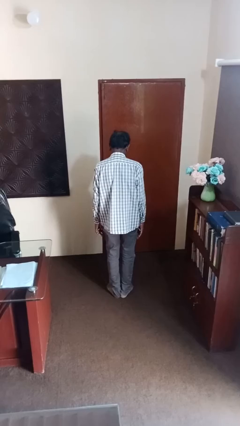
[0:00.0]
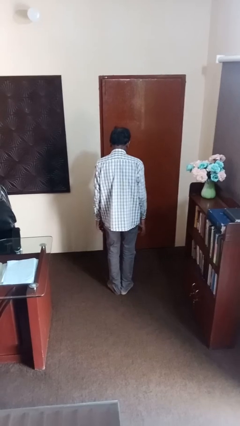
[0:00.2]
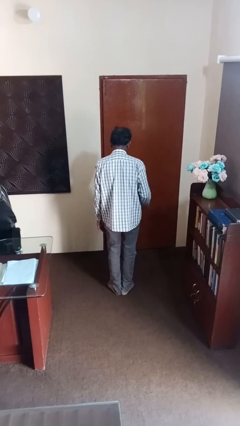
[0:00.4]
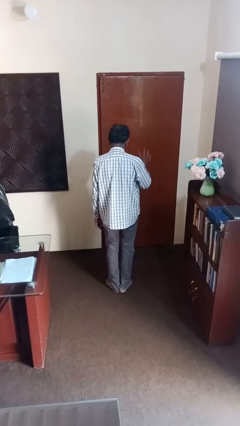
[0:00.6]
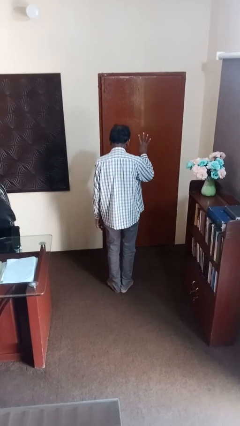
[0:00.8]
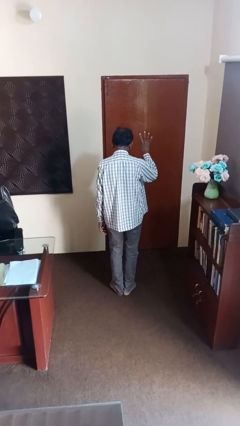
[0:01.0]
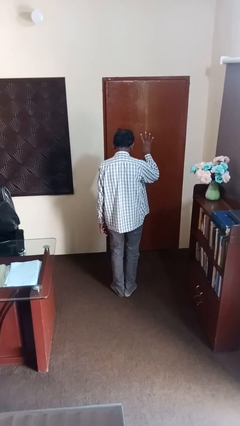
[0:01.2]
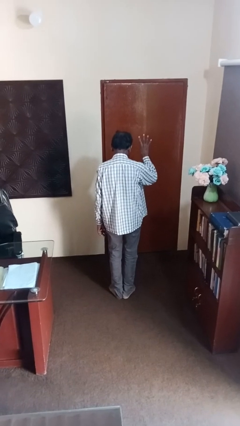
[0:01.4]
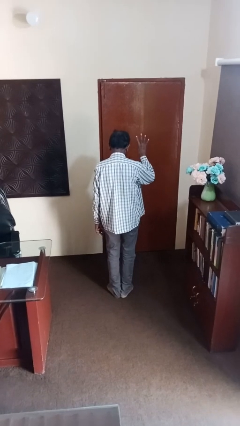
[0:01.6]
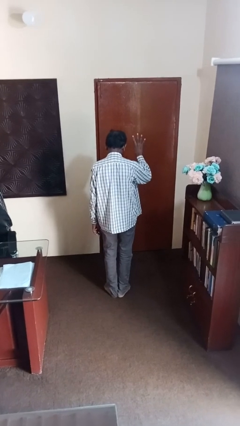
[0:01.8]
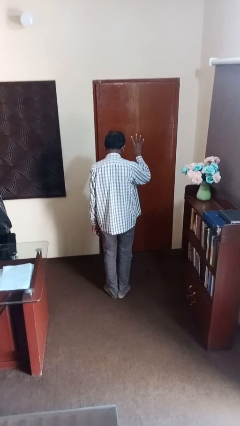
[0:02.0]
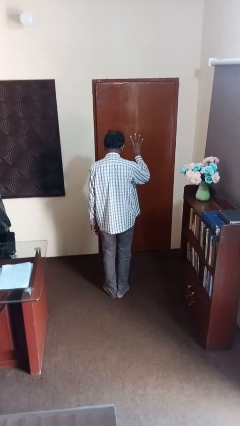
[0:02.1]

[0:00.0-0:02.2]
person gestures number four

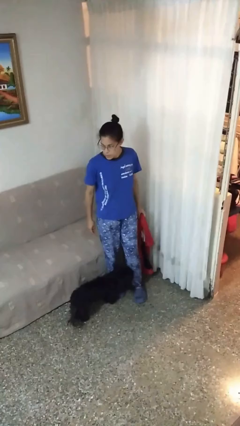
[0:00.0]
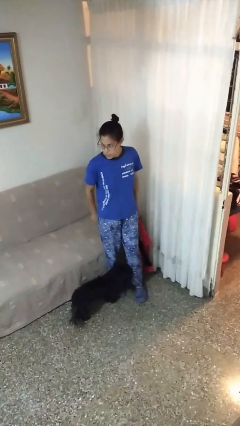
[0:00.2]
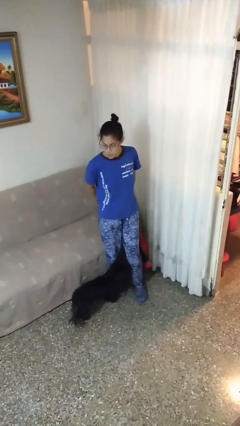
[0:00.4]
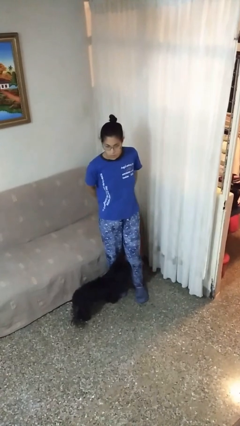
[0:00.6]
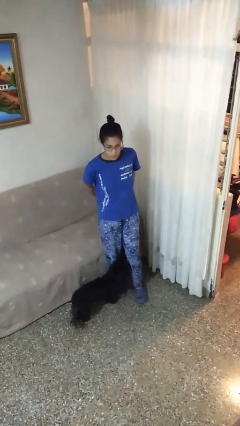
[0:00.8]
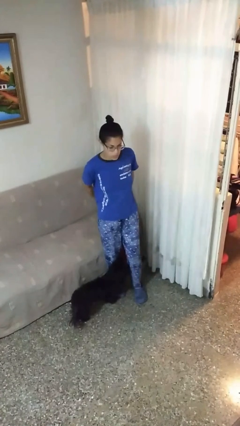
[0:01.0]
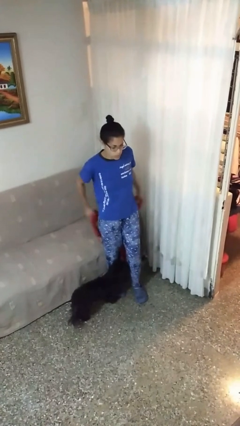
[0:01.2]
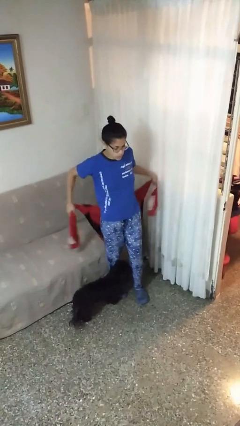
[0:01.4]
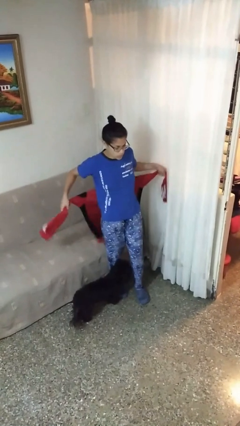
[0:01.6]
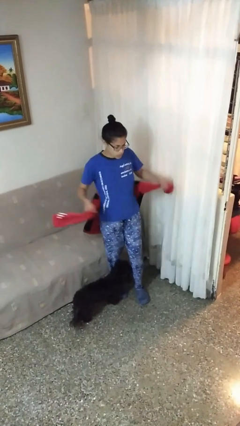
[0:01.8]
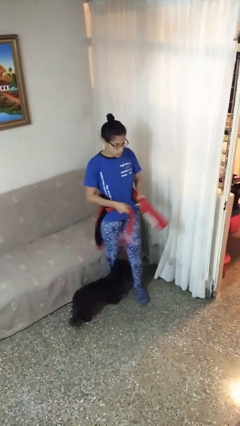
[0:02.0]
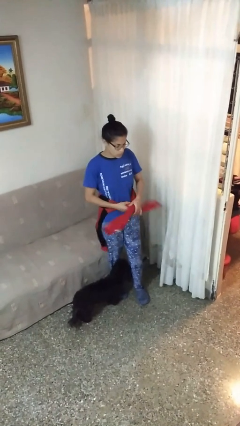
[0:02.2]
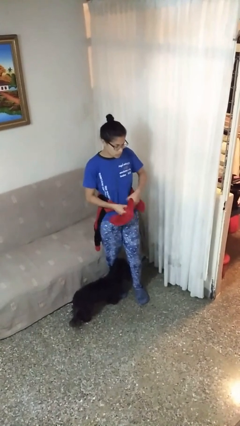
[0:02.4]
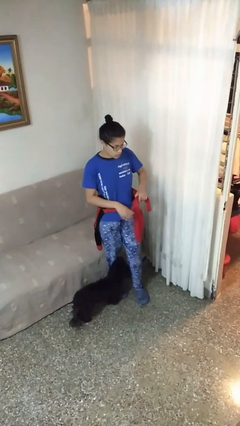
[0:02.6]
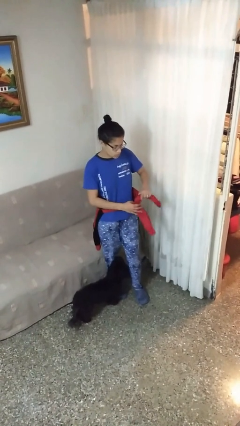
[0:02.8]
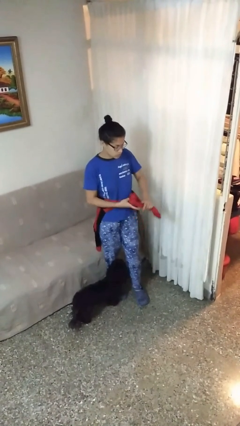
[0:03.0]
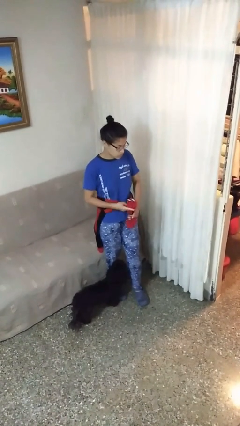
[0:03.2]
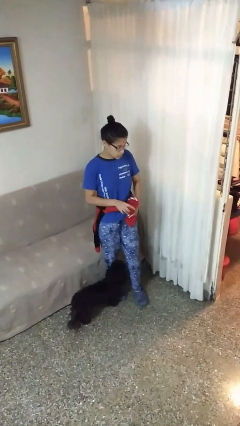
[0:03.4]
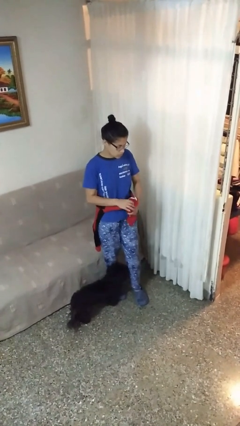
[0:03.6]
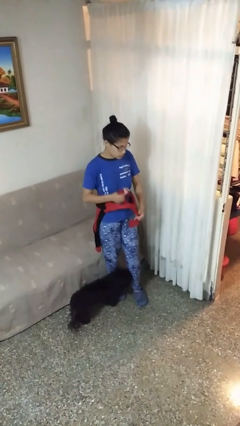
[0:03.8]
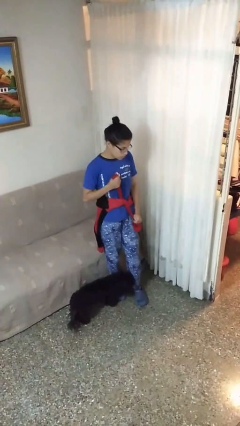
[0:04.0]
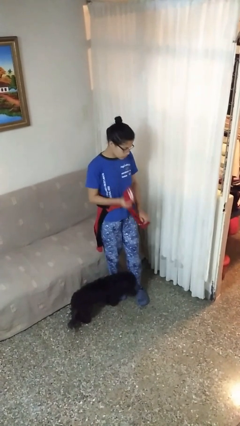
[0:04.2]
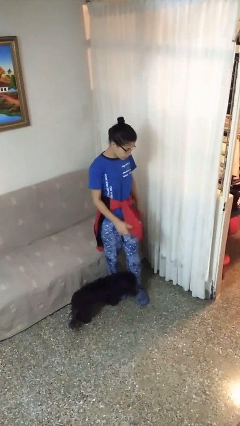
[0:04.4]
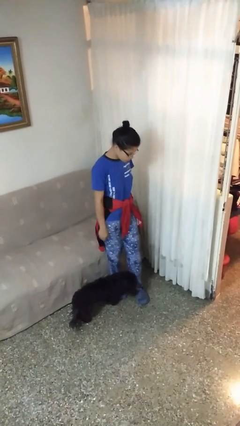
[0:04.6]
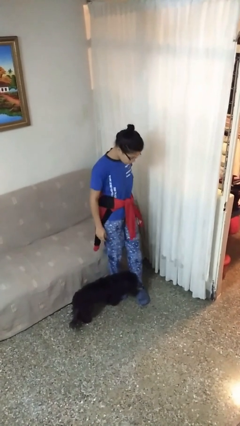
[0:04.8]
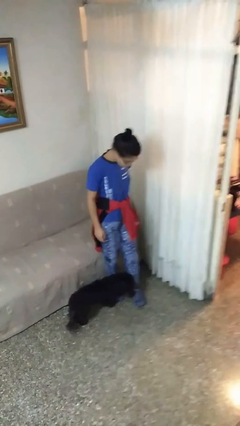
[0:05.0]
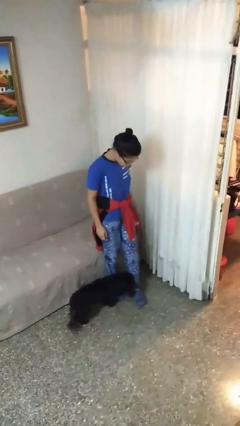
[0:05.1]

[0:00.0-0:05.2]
person ties jacket around waist

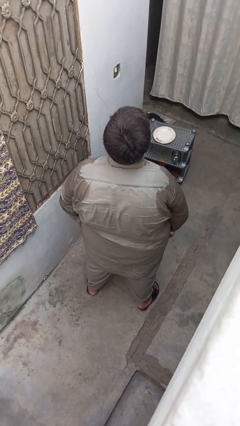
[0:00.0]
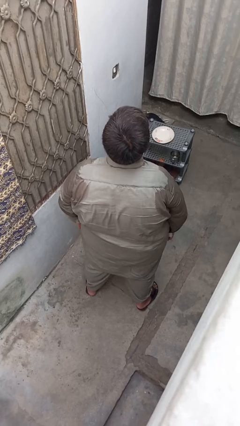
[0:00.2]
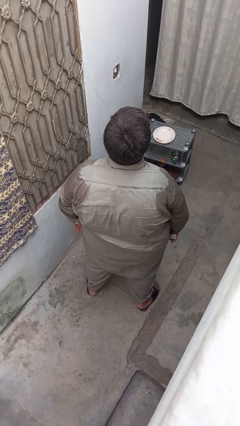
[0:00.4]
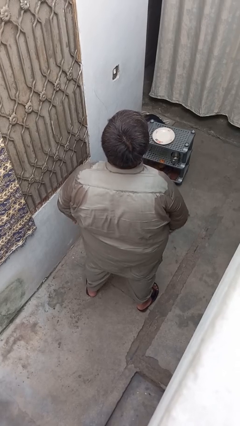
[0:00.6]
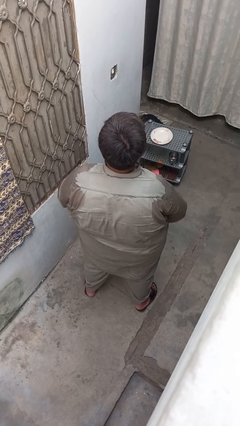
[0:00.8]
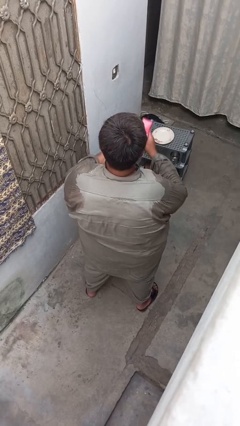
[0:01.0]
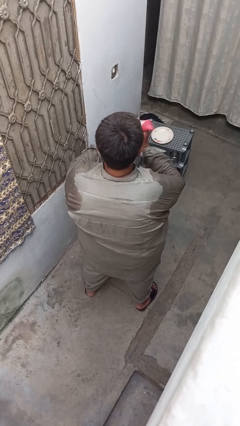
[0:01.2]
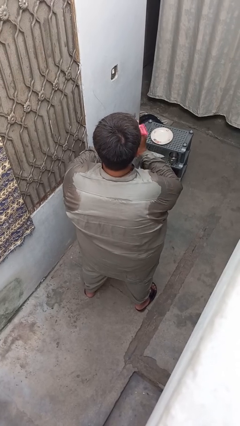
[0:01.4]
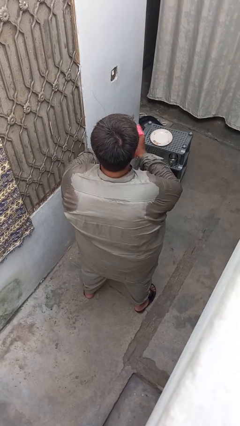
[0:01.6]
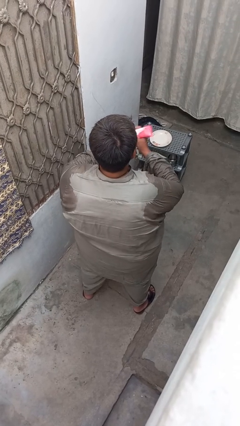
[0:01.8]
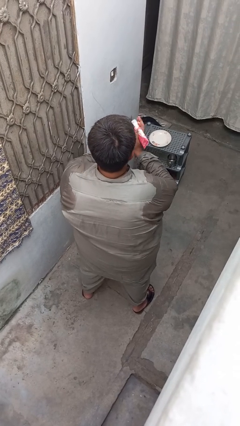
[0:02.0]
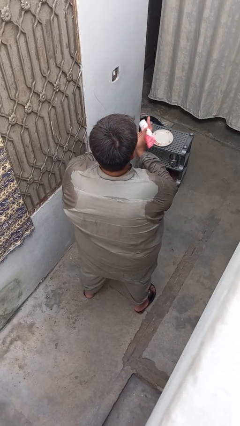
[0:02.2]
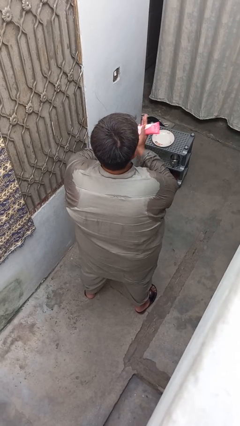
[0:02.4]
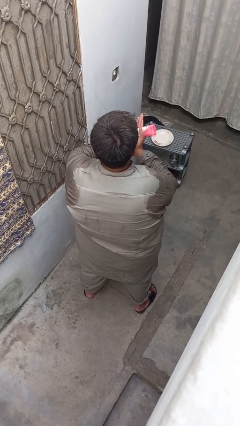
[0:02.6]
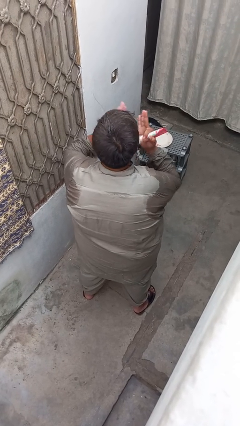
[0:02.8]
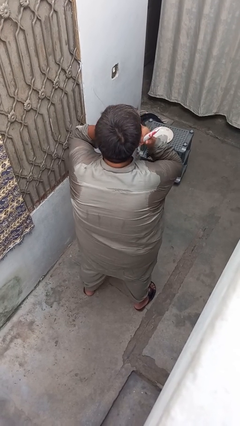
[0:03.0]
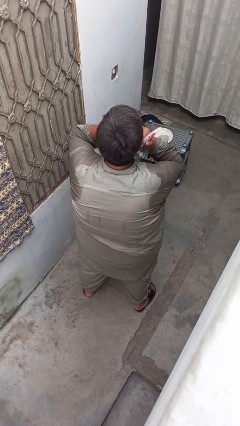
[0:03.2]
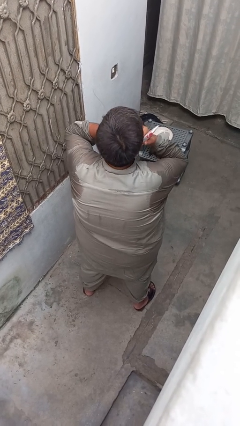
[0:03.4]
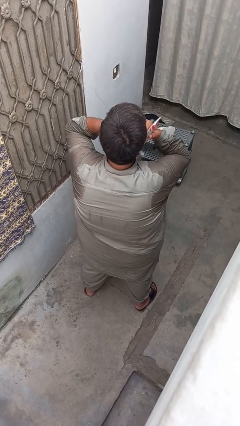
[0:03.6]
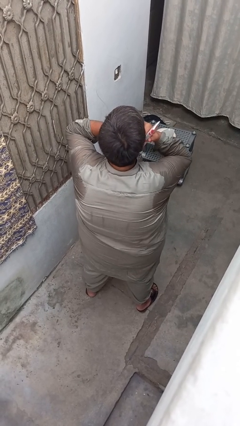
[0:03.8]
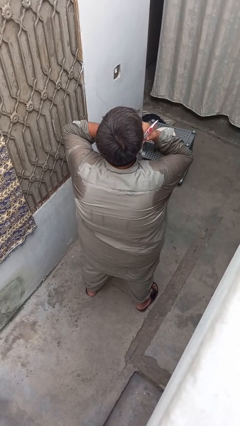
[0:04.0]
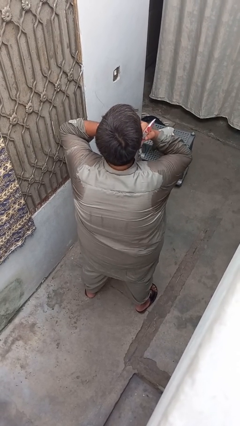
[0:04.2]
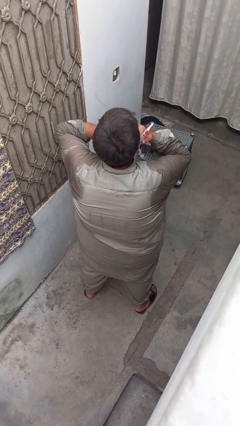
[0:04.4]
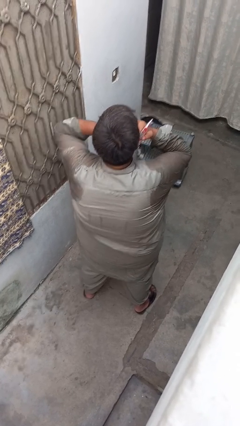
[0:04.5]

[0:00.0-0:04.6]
person applies facial moisturizer

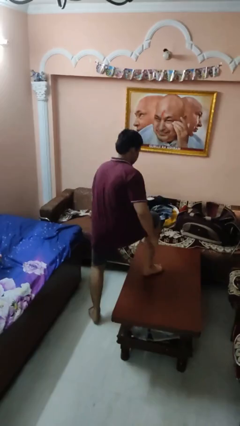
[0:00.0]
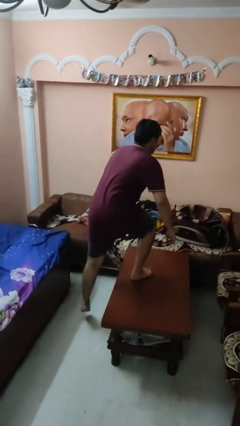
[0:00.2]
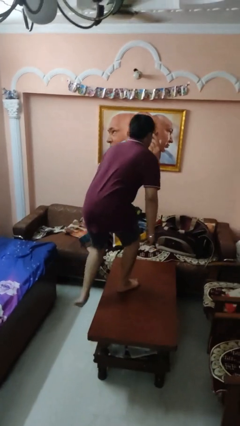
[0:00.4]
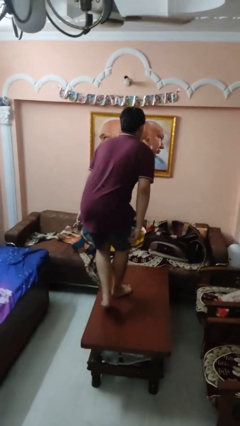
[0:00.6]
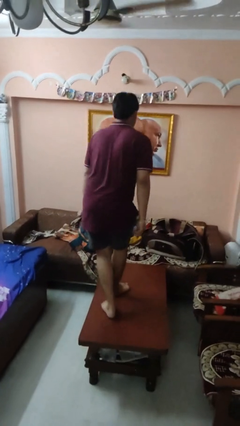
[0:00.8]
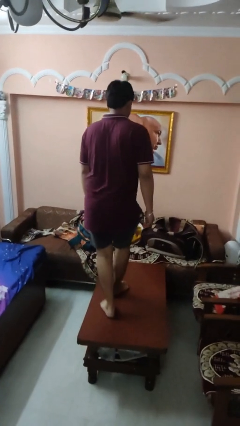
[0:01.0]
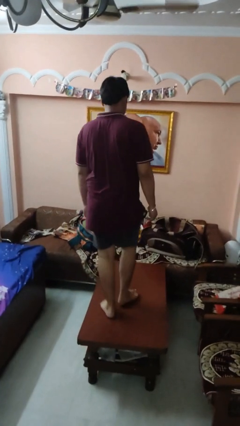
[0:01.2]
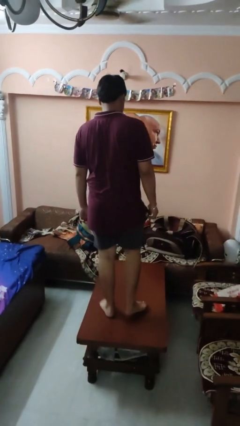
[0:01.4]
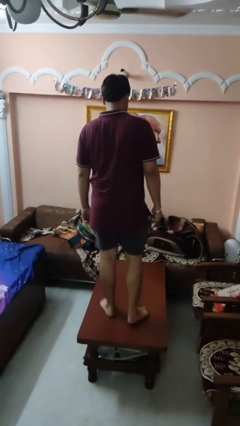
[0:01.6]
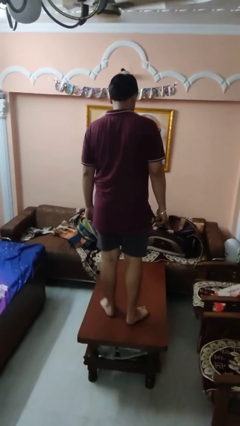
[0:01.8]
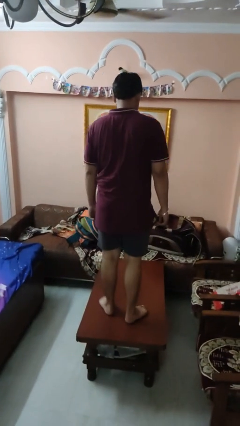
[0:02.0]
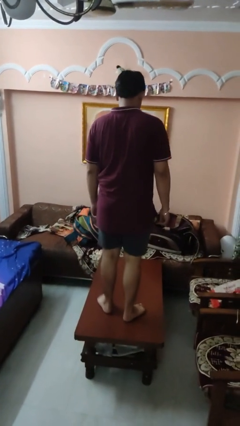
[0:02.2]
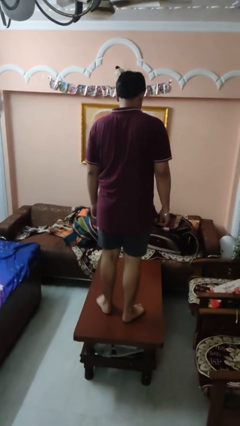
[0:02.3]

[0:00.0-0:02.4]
person climbs on table

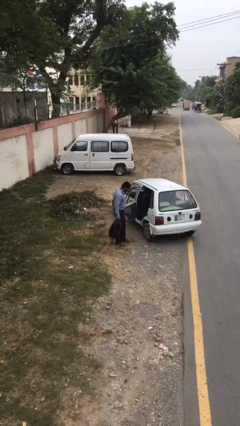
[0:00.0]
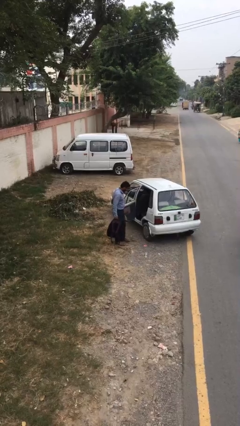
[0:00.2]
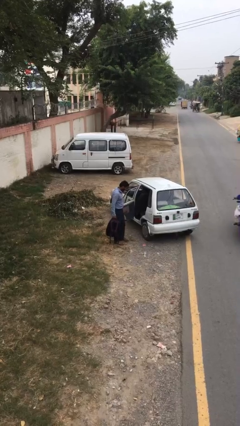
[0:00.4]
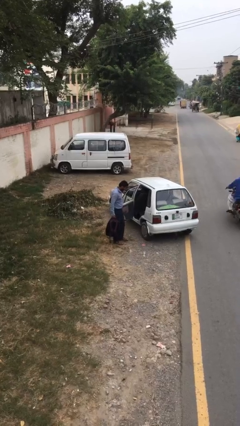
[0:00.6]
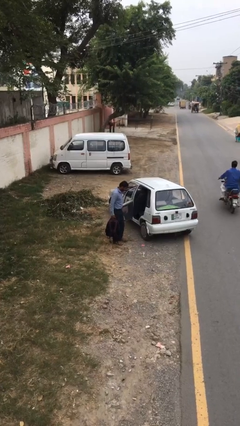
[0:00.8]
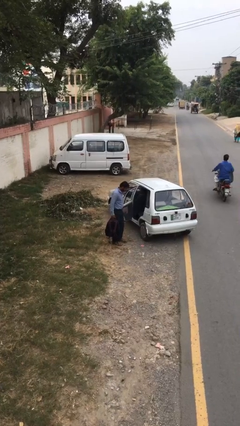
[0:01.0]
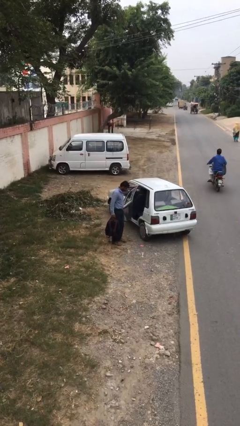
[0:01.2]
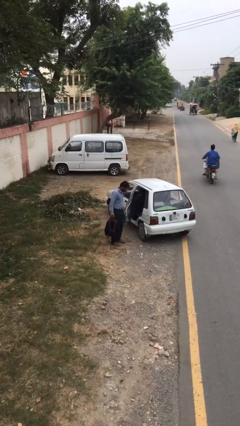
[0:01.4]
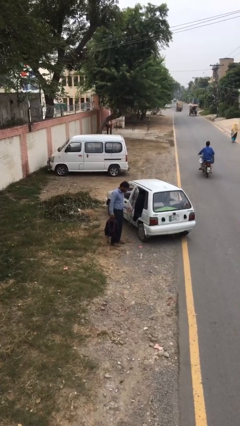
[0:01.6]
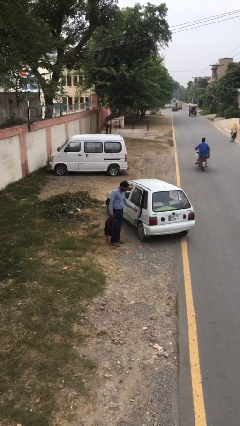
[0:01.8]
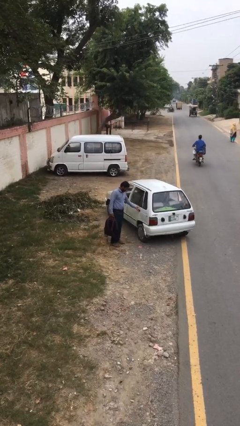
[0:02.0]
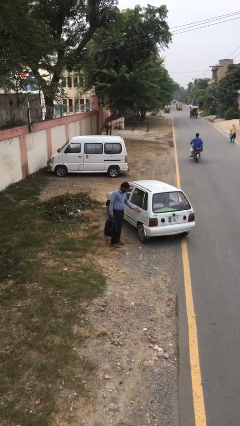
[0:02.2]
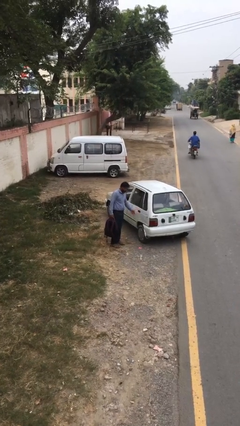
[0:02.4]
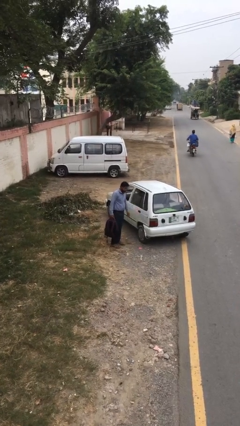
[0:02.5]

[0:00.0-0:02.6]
person closes car door

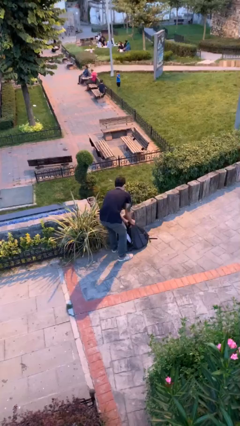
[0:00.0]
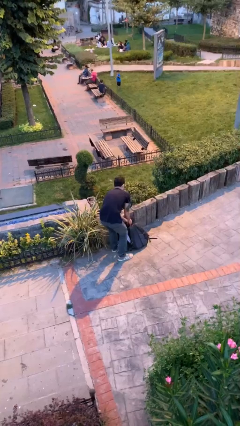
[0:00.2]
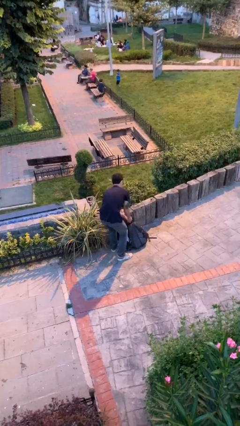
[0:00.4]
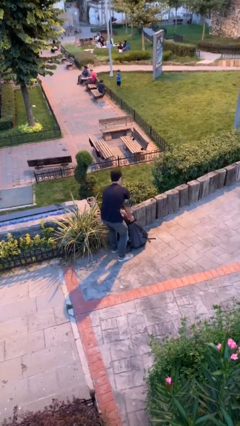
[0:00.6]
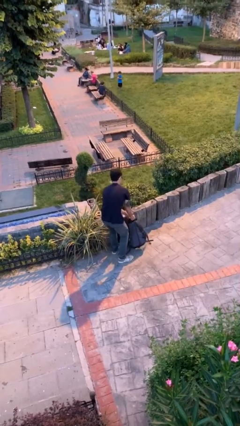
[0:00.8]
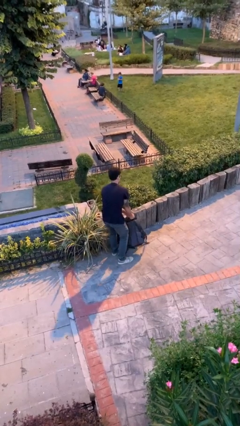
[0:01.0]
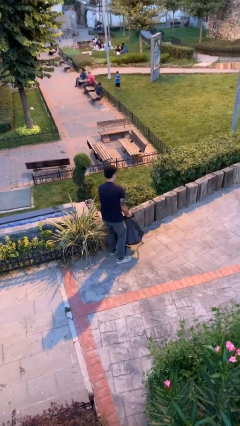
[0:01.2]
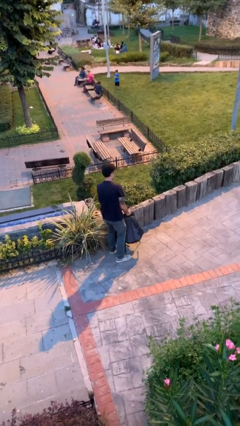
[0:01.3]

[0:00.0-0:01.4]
person picks up object from floor
